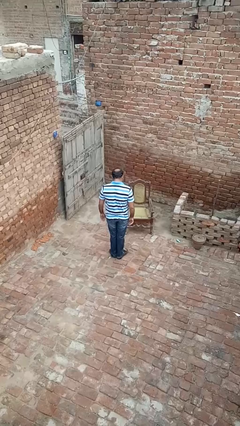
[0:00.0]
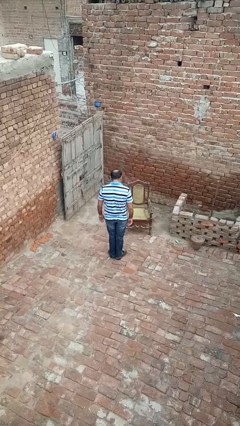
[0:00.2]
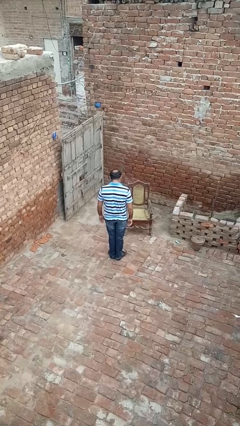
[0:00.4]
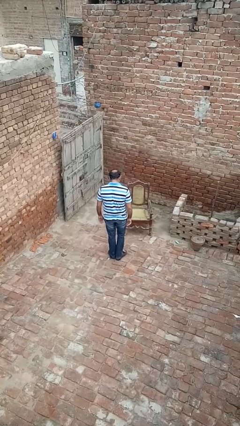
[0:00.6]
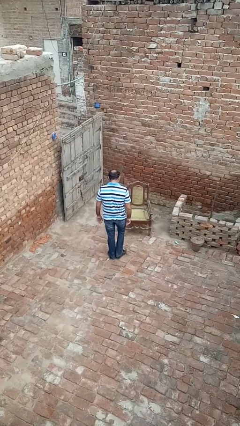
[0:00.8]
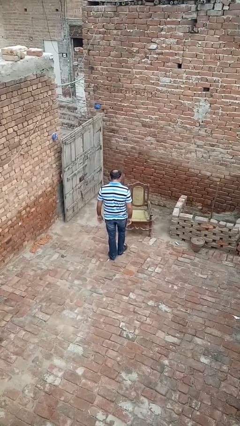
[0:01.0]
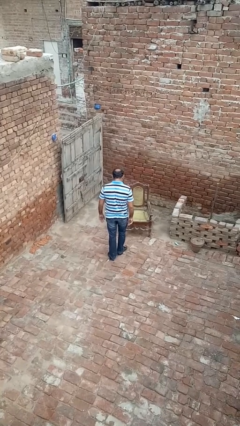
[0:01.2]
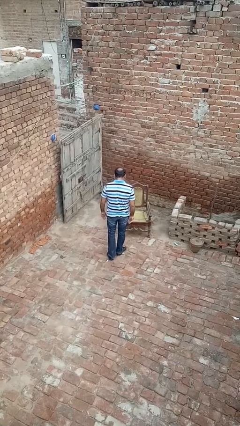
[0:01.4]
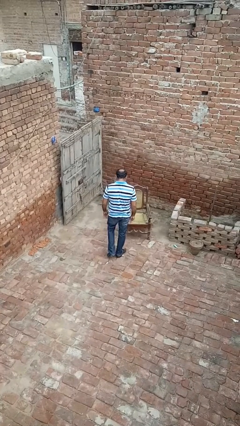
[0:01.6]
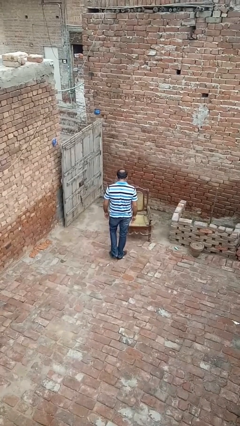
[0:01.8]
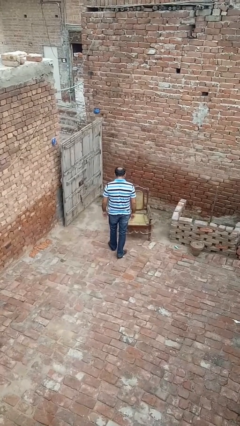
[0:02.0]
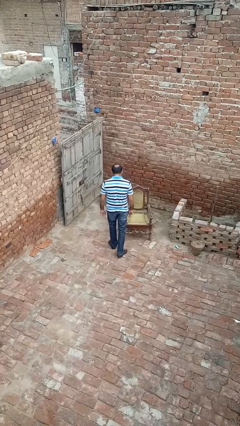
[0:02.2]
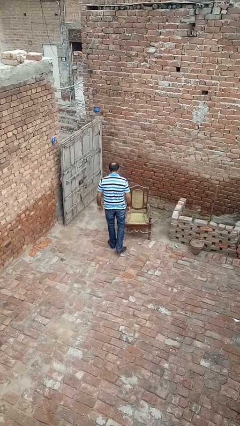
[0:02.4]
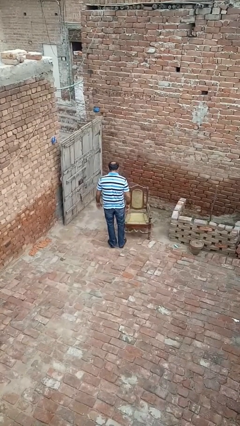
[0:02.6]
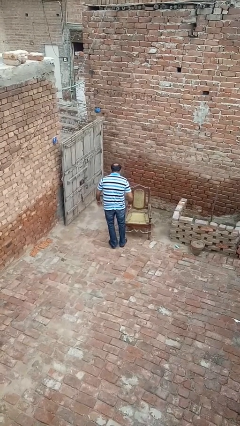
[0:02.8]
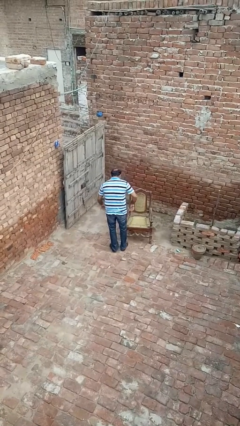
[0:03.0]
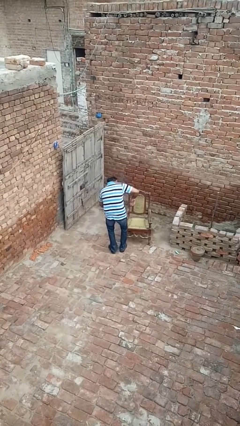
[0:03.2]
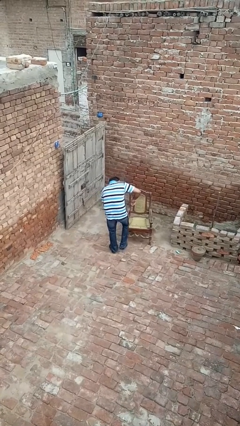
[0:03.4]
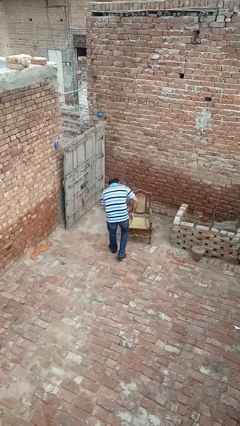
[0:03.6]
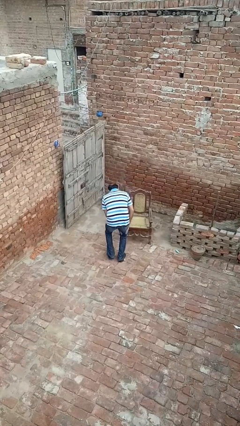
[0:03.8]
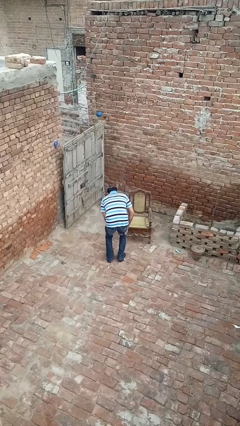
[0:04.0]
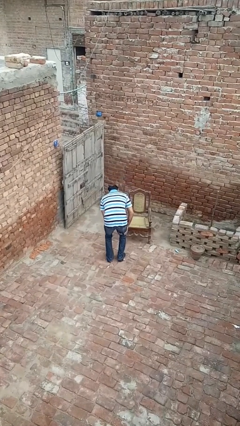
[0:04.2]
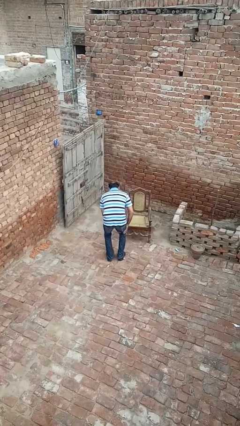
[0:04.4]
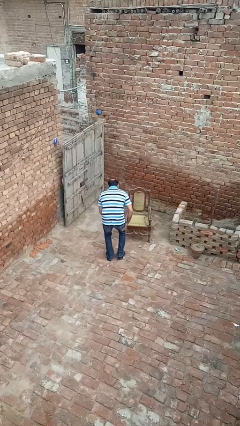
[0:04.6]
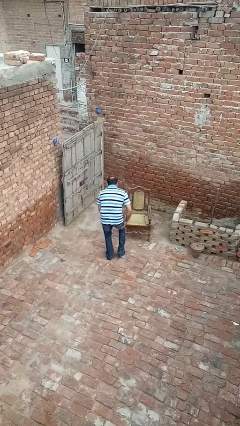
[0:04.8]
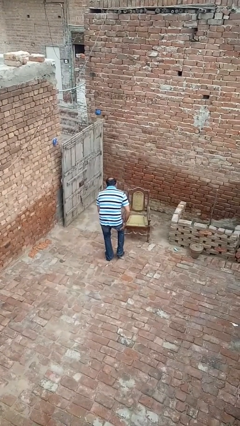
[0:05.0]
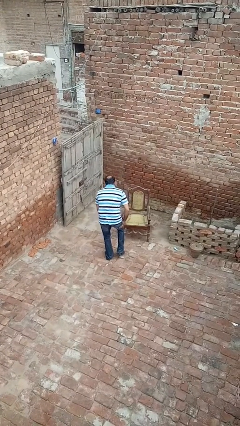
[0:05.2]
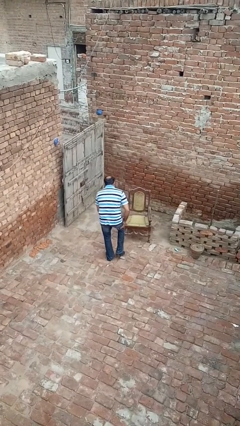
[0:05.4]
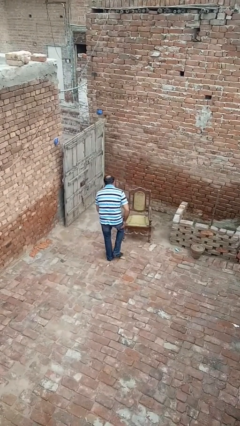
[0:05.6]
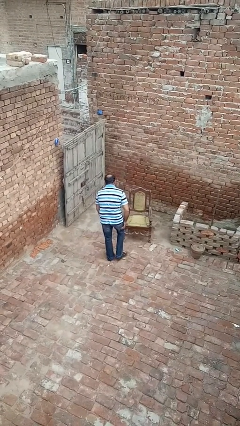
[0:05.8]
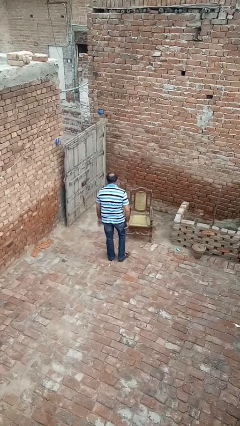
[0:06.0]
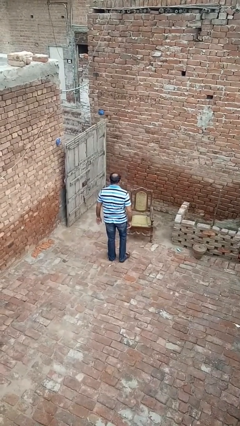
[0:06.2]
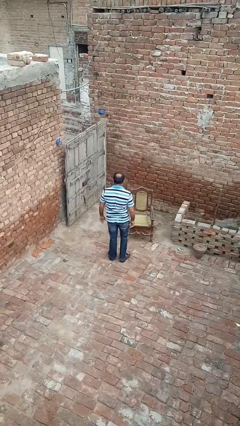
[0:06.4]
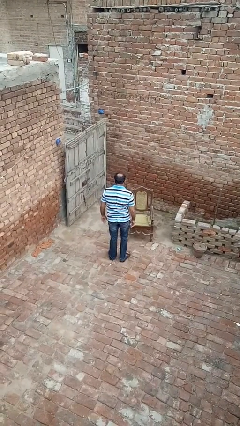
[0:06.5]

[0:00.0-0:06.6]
person stubs toe

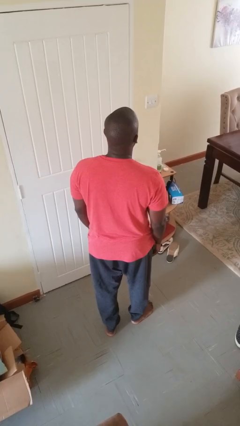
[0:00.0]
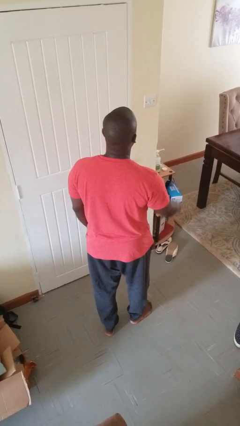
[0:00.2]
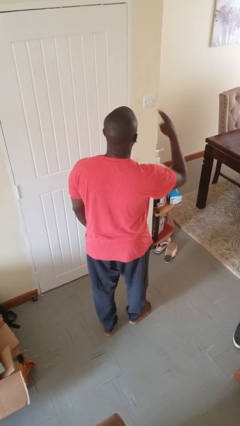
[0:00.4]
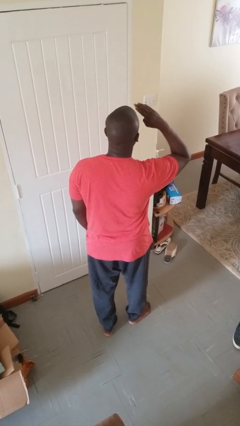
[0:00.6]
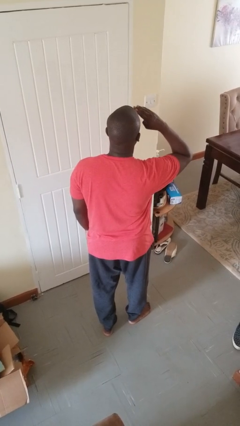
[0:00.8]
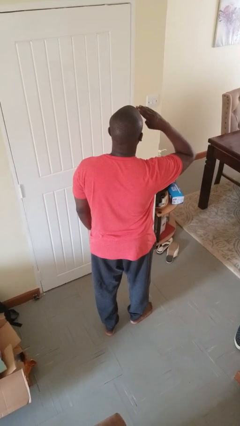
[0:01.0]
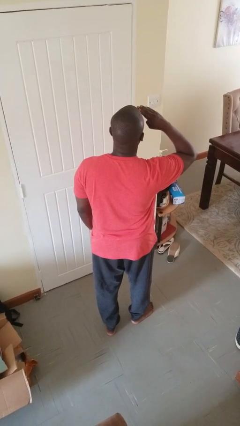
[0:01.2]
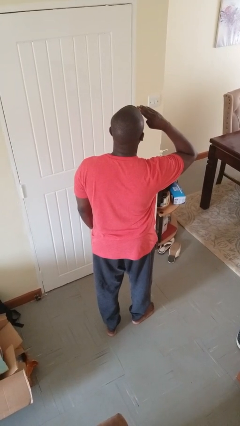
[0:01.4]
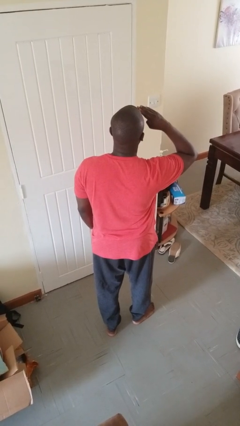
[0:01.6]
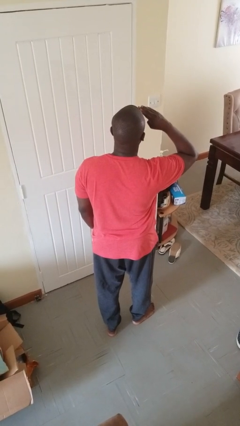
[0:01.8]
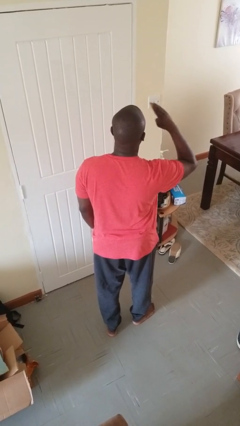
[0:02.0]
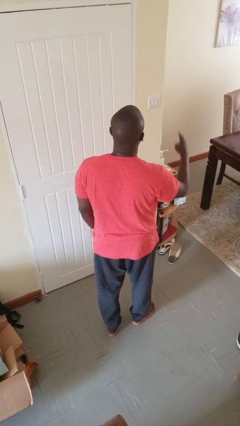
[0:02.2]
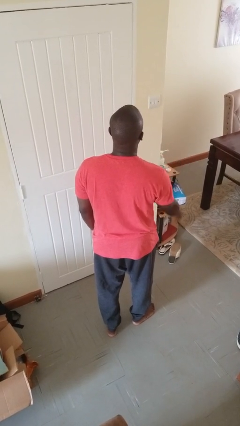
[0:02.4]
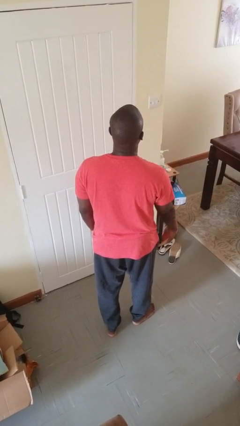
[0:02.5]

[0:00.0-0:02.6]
person salutes

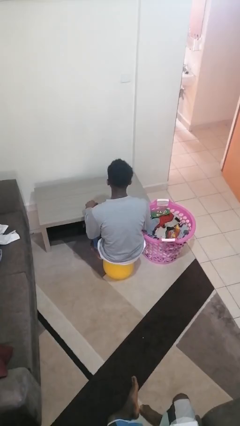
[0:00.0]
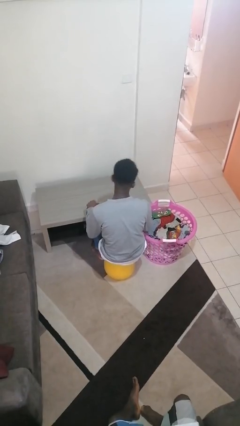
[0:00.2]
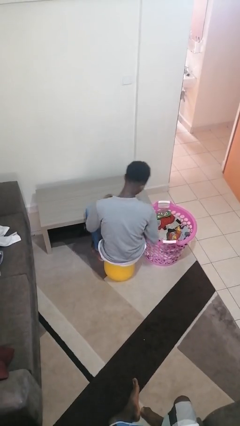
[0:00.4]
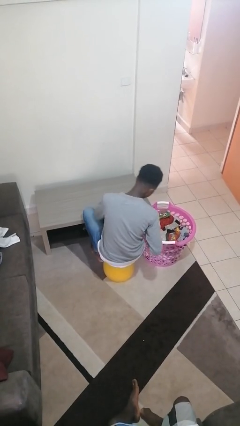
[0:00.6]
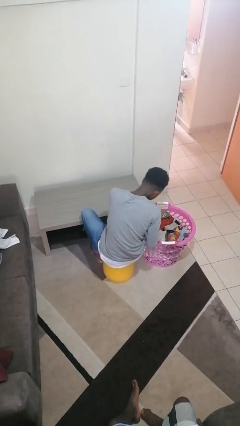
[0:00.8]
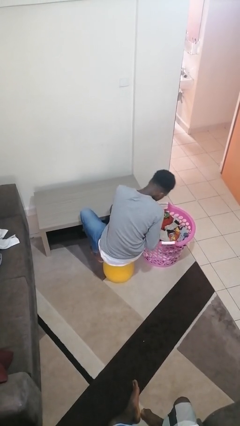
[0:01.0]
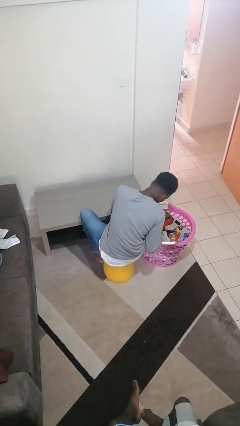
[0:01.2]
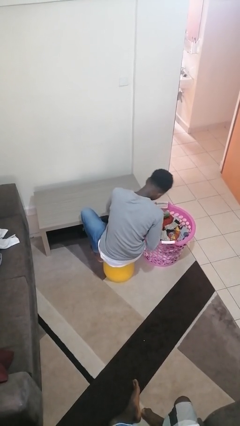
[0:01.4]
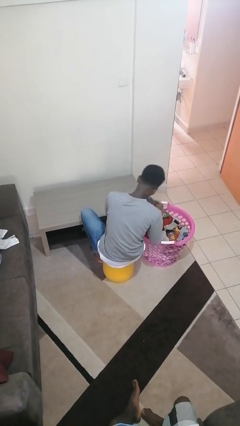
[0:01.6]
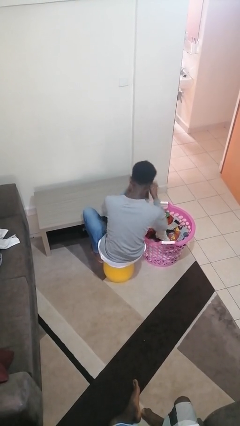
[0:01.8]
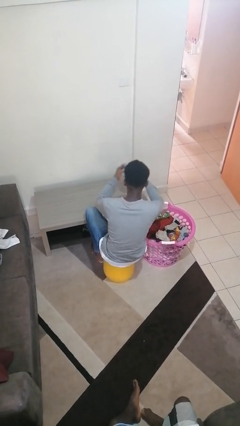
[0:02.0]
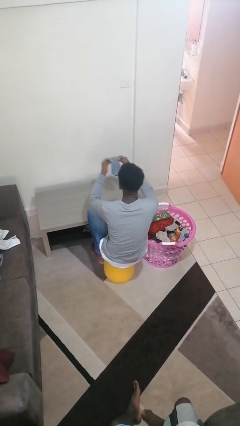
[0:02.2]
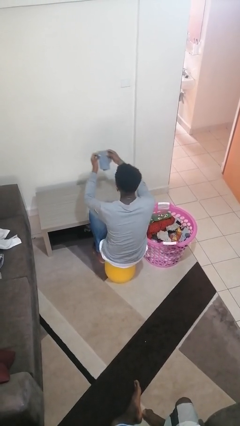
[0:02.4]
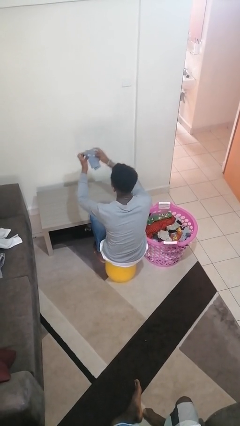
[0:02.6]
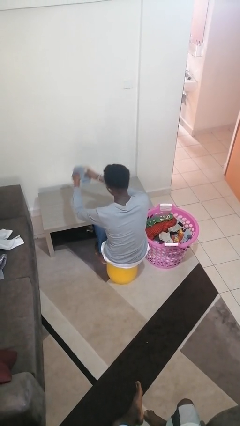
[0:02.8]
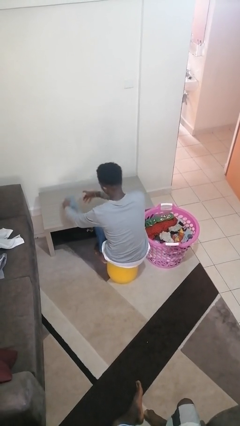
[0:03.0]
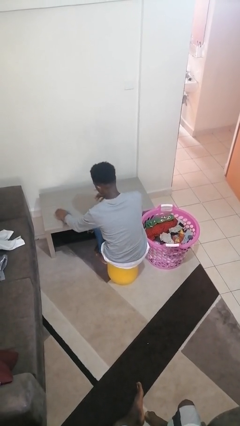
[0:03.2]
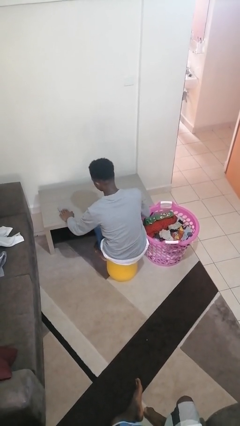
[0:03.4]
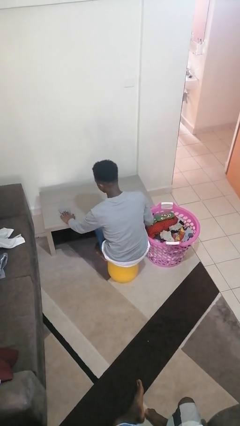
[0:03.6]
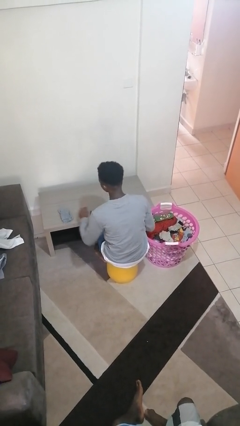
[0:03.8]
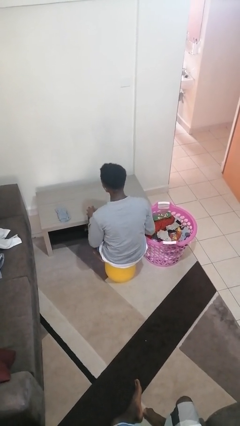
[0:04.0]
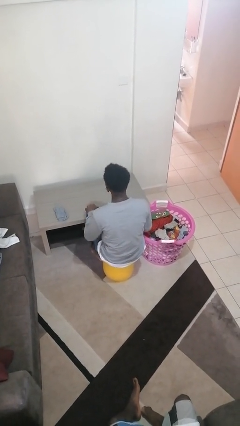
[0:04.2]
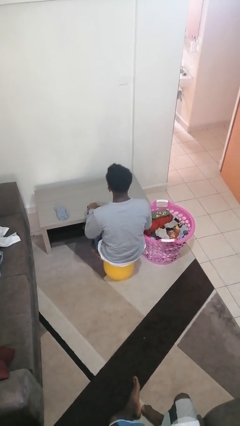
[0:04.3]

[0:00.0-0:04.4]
person folds socks

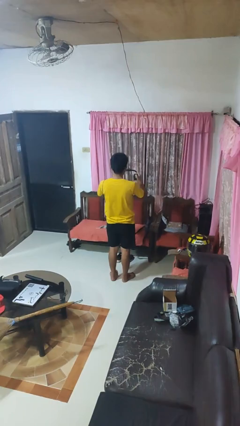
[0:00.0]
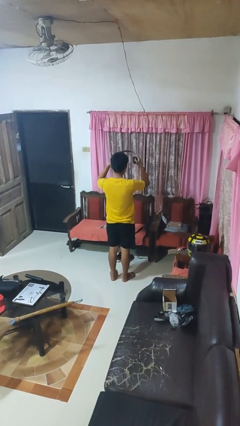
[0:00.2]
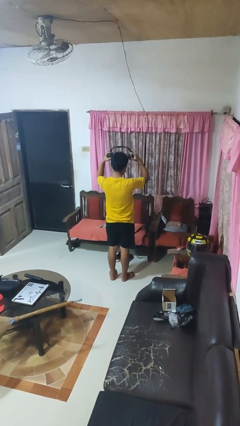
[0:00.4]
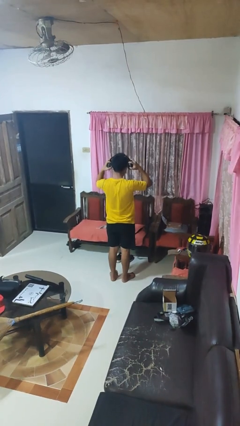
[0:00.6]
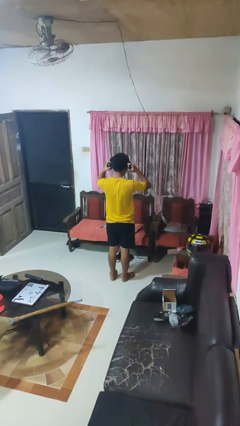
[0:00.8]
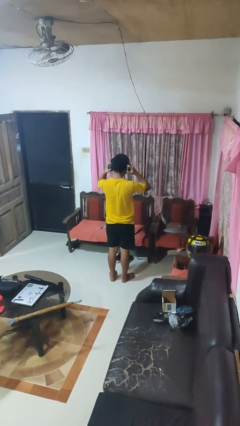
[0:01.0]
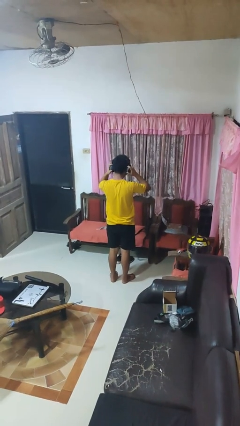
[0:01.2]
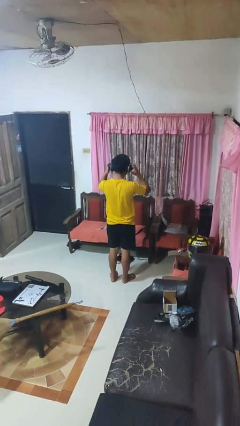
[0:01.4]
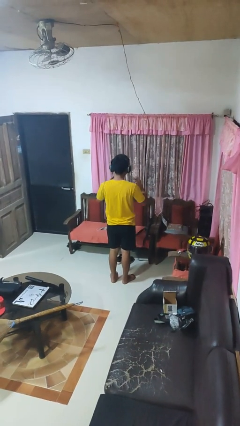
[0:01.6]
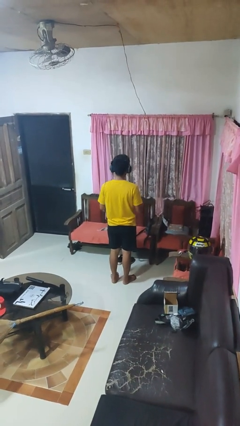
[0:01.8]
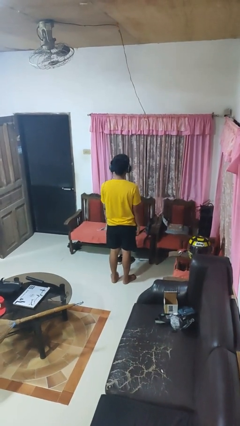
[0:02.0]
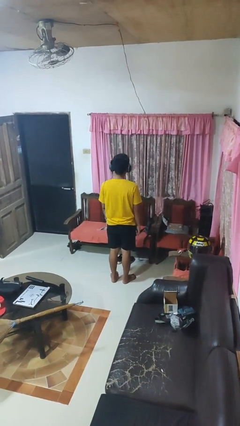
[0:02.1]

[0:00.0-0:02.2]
person puts on headphones

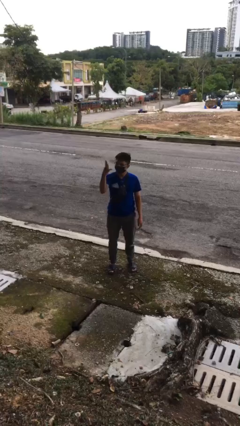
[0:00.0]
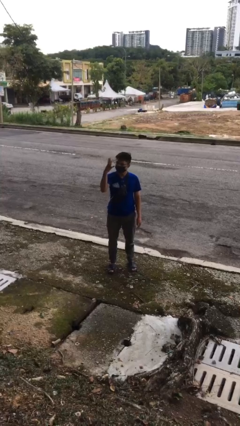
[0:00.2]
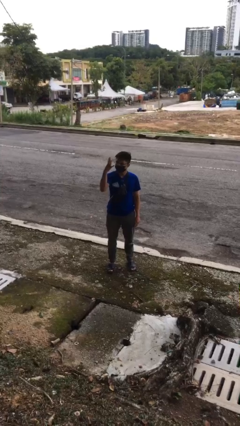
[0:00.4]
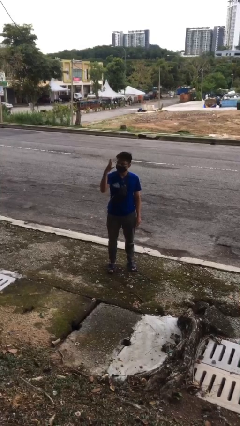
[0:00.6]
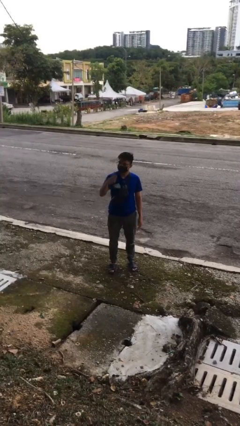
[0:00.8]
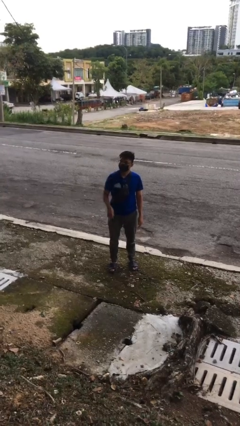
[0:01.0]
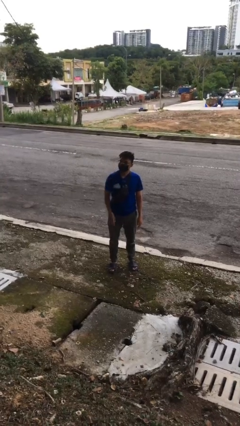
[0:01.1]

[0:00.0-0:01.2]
person gestures number four

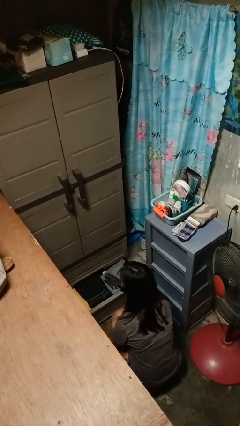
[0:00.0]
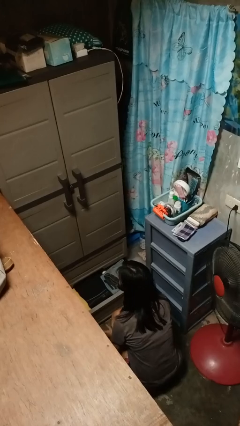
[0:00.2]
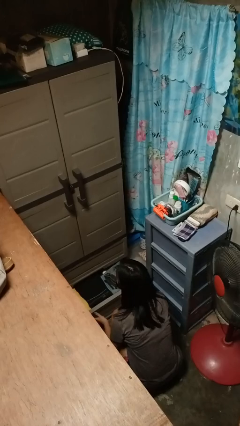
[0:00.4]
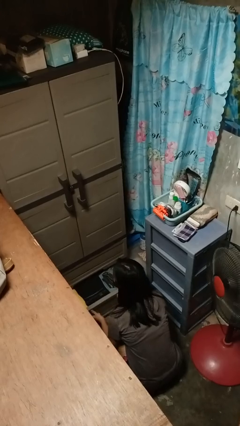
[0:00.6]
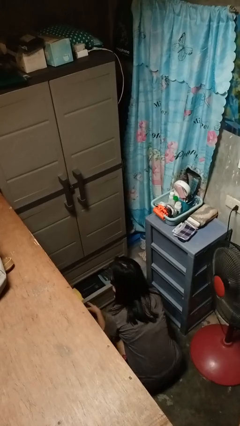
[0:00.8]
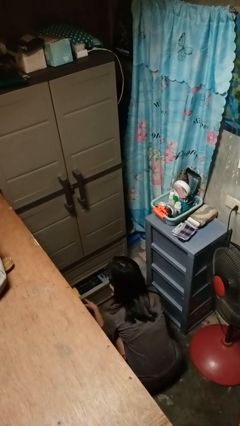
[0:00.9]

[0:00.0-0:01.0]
person closes dresser drawer
